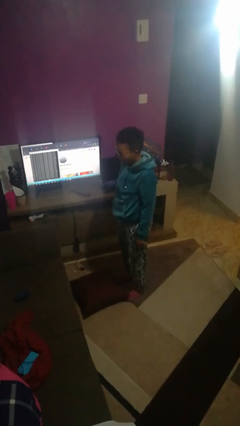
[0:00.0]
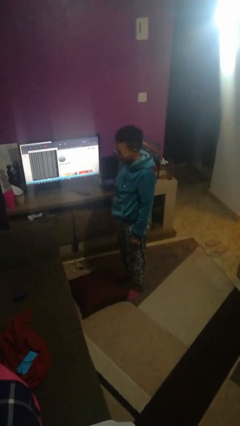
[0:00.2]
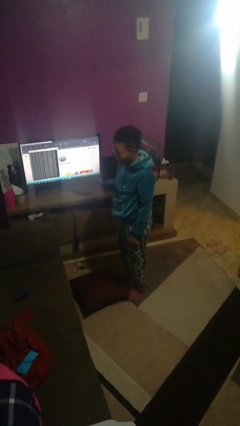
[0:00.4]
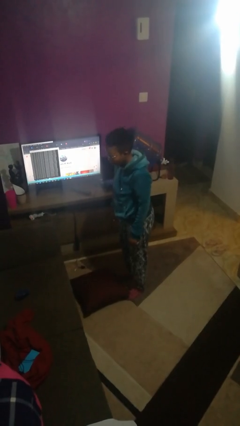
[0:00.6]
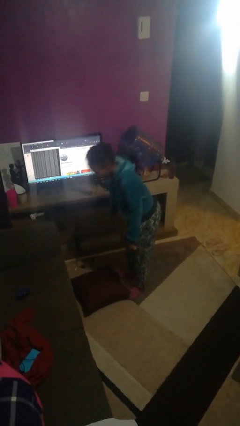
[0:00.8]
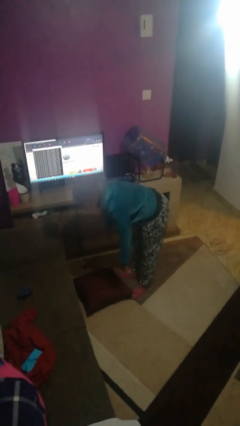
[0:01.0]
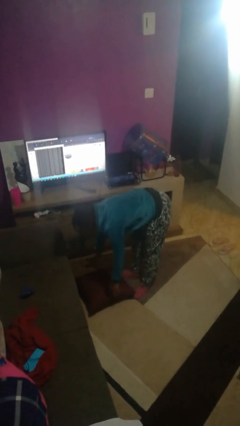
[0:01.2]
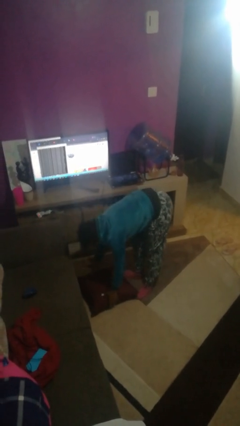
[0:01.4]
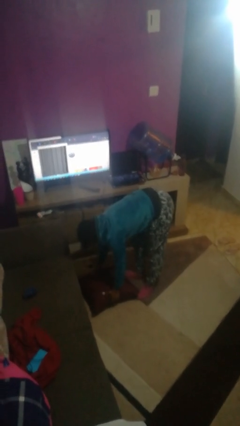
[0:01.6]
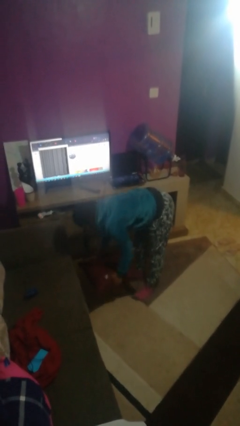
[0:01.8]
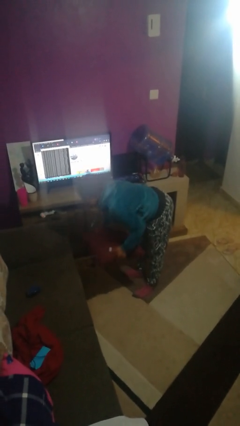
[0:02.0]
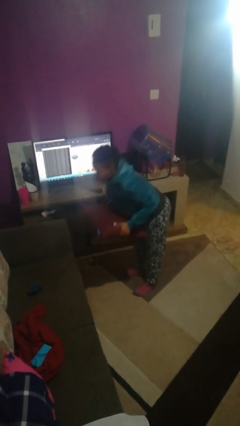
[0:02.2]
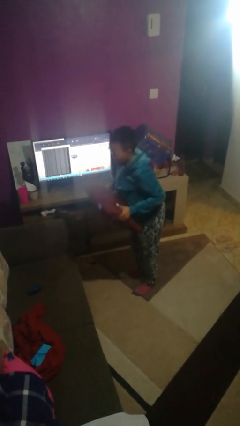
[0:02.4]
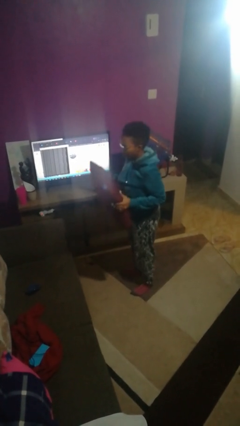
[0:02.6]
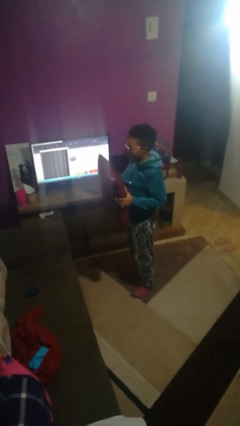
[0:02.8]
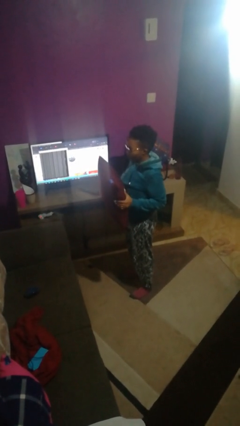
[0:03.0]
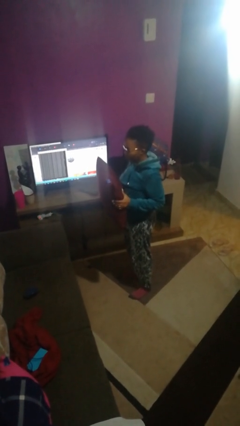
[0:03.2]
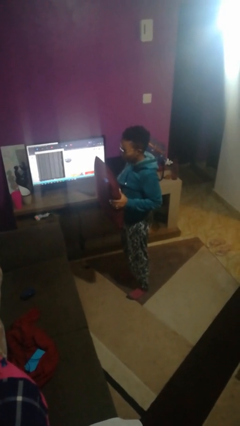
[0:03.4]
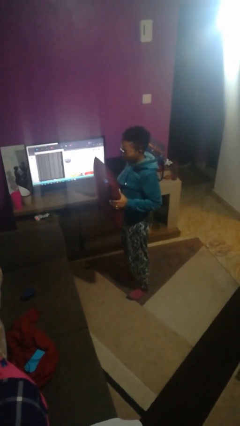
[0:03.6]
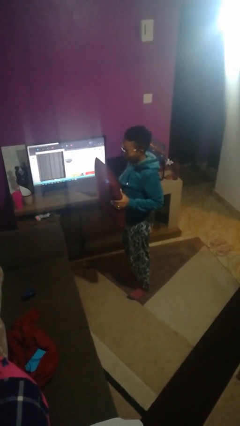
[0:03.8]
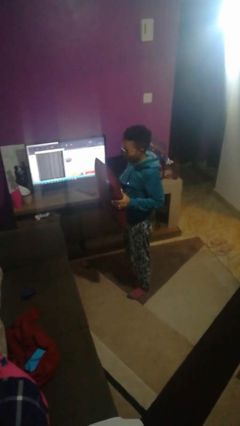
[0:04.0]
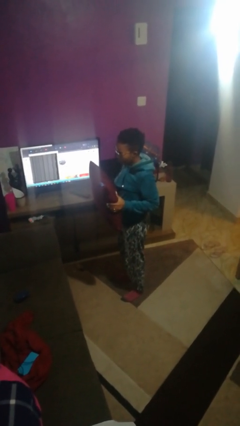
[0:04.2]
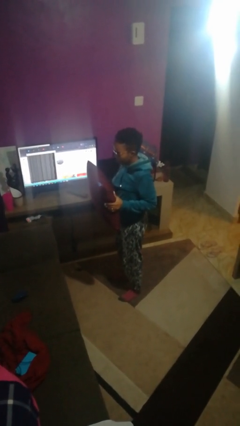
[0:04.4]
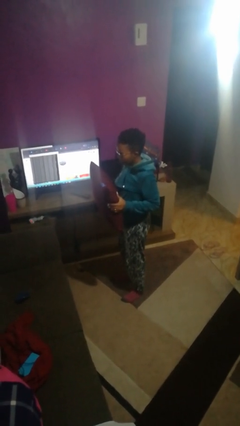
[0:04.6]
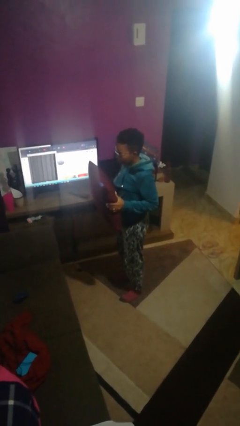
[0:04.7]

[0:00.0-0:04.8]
person picks up object from floor

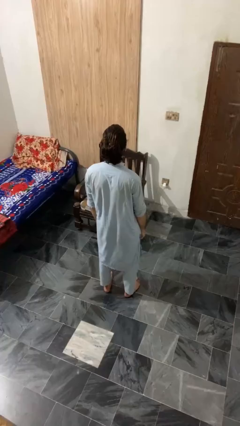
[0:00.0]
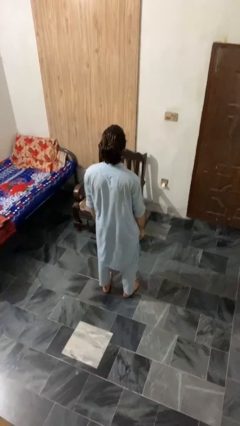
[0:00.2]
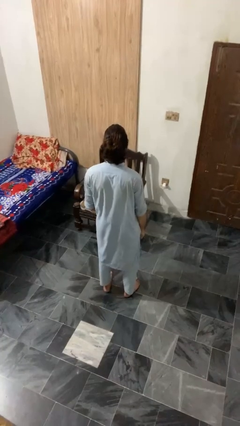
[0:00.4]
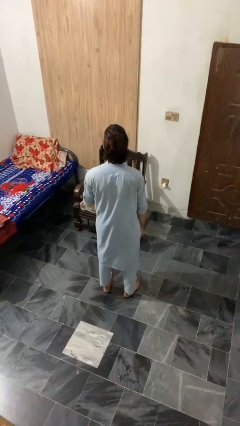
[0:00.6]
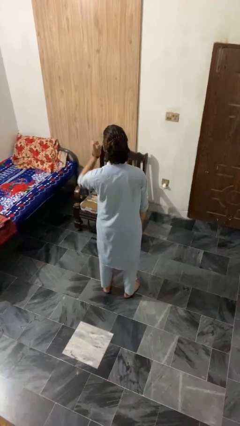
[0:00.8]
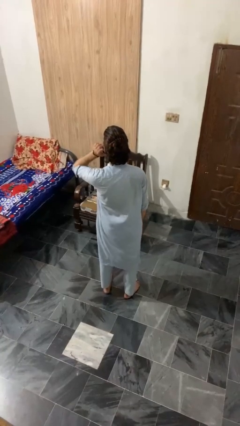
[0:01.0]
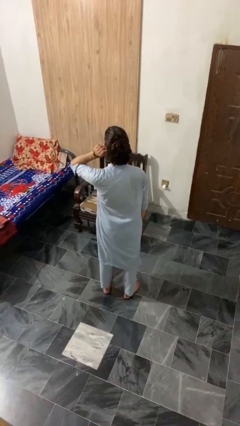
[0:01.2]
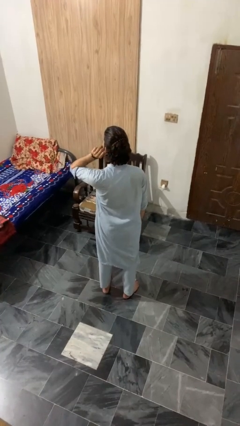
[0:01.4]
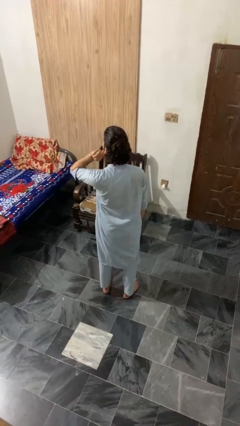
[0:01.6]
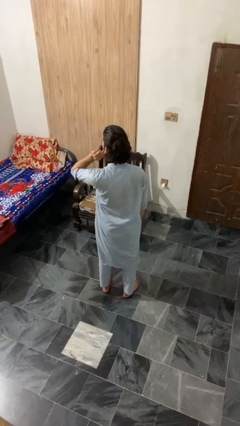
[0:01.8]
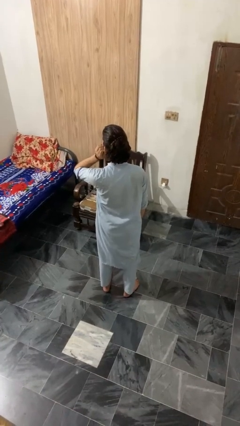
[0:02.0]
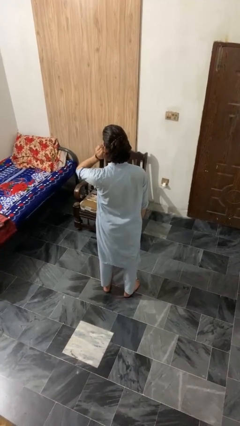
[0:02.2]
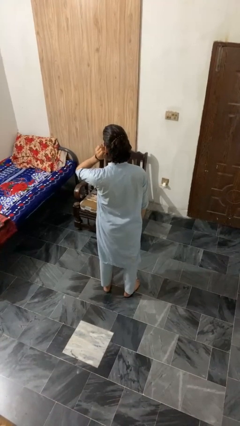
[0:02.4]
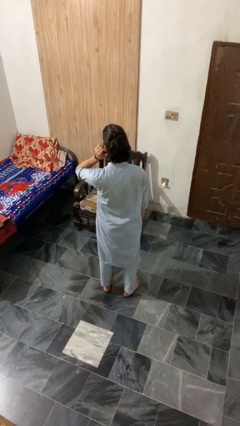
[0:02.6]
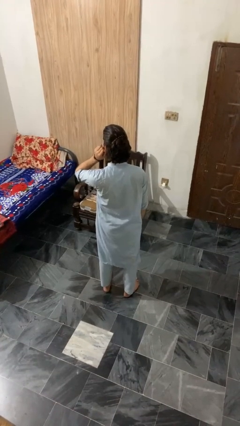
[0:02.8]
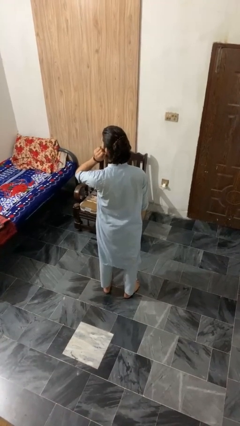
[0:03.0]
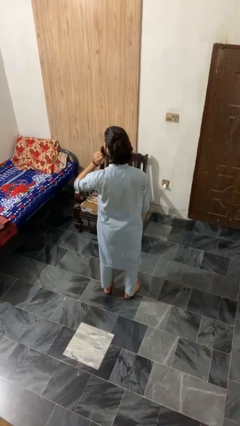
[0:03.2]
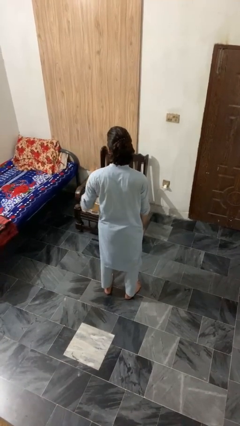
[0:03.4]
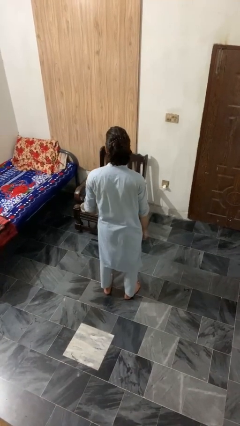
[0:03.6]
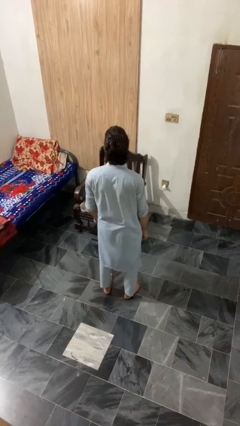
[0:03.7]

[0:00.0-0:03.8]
person touches earlobe

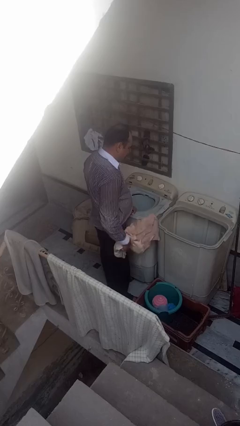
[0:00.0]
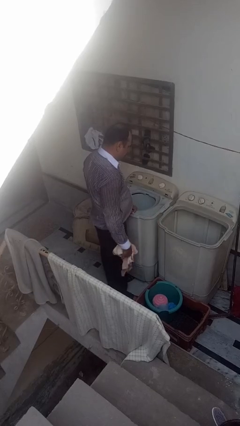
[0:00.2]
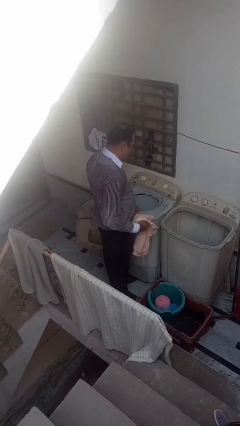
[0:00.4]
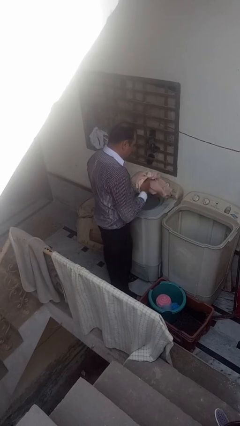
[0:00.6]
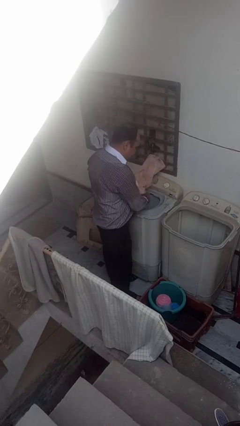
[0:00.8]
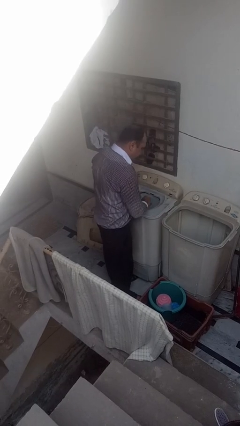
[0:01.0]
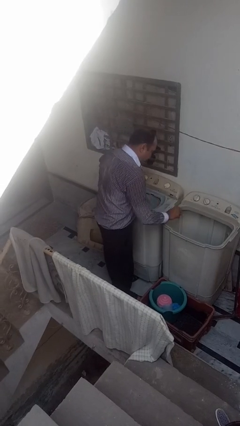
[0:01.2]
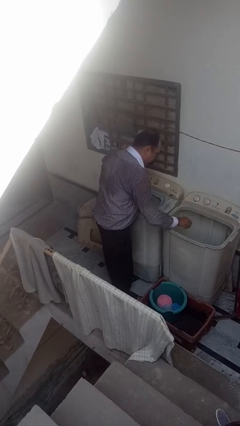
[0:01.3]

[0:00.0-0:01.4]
person loads dryer

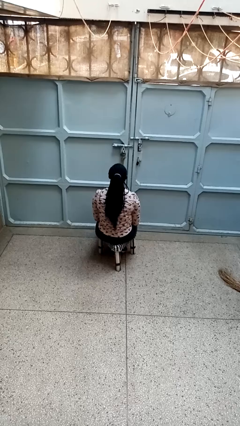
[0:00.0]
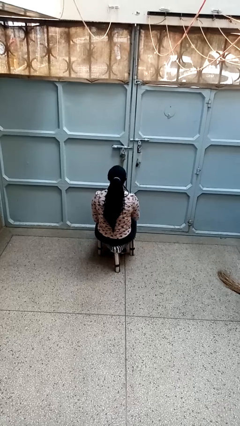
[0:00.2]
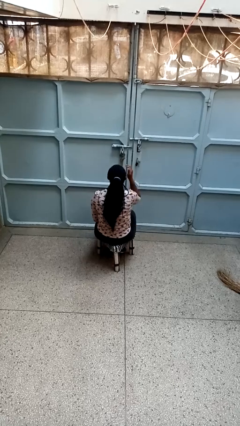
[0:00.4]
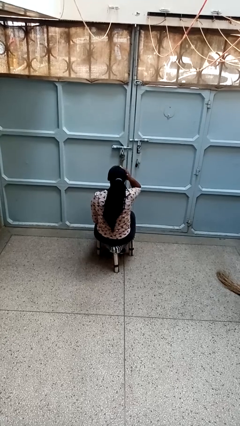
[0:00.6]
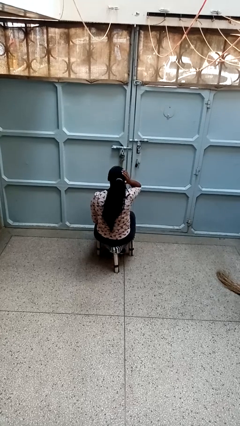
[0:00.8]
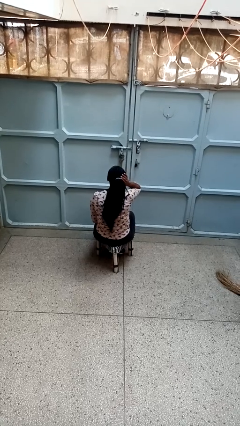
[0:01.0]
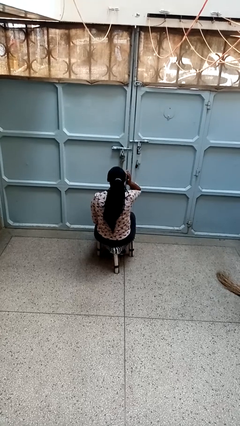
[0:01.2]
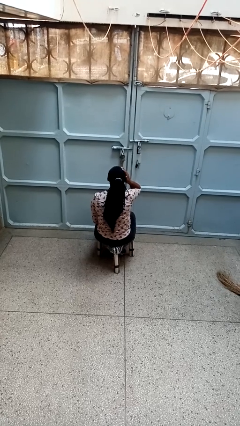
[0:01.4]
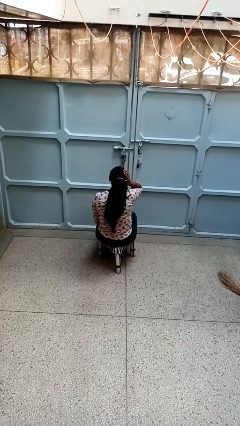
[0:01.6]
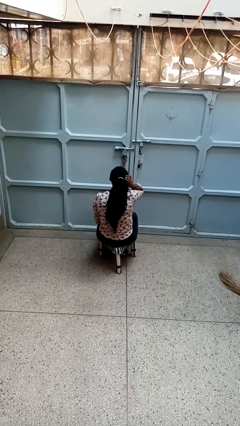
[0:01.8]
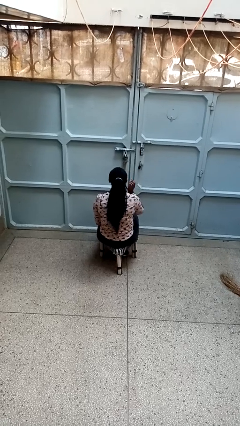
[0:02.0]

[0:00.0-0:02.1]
person strokes hair

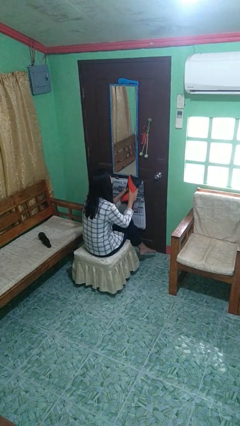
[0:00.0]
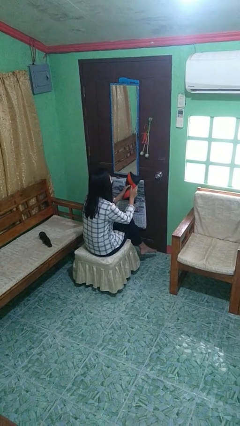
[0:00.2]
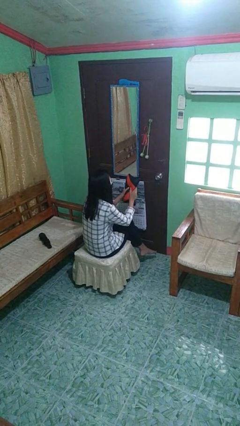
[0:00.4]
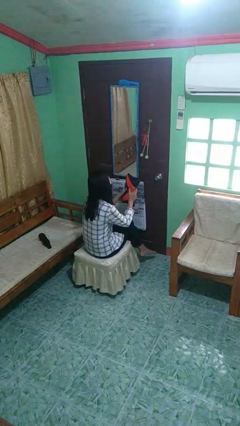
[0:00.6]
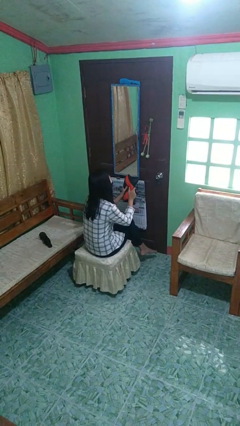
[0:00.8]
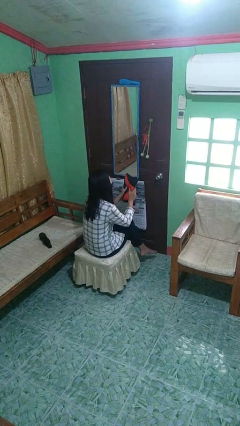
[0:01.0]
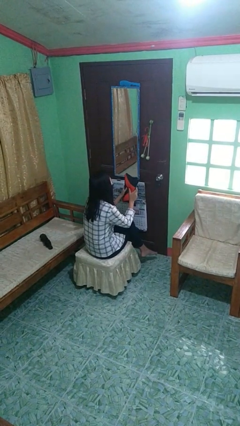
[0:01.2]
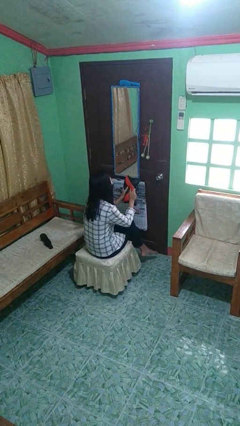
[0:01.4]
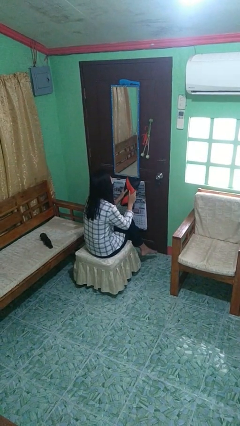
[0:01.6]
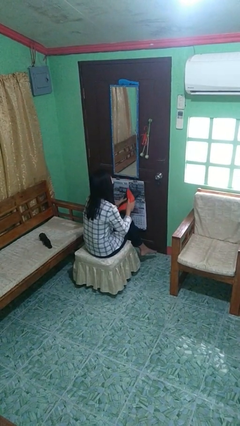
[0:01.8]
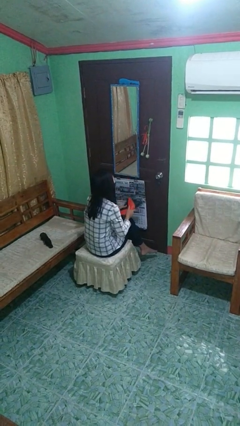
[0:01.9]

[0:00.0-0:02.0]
person squeezes object

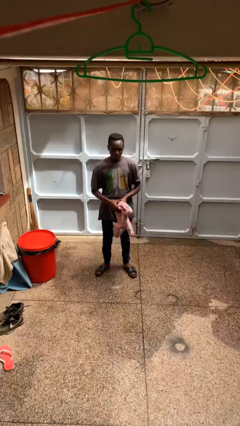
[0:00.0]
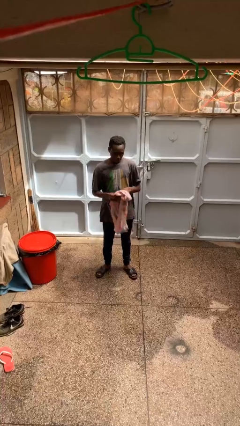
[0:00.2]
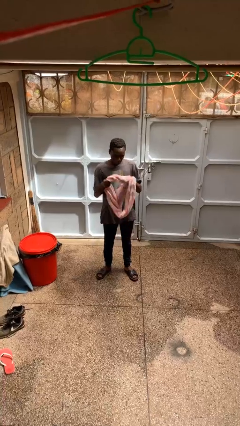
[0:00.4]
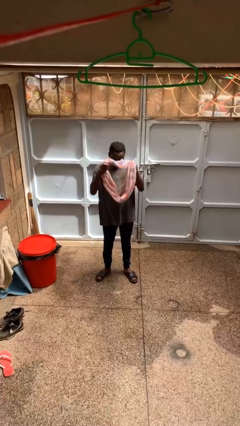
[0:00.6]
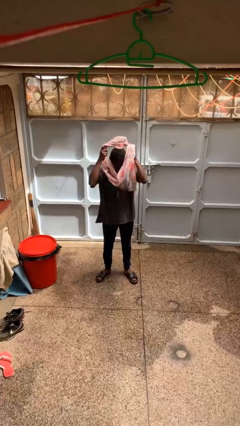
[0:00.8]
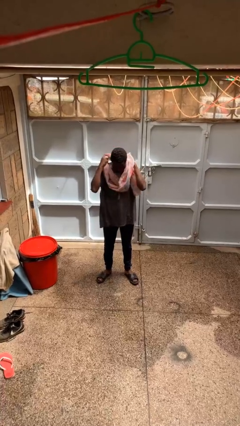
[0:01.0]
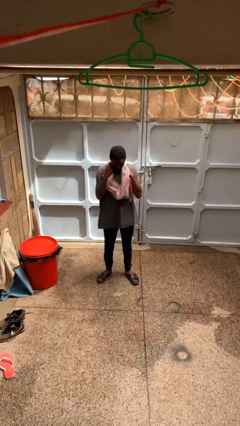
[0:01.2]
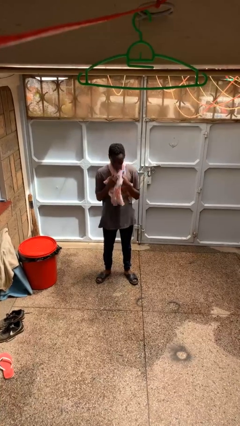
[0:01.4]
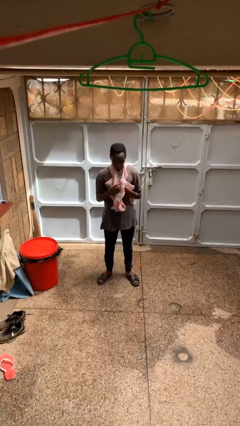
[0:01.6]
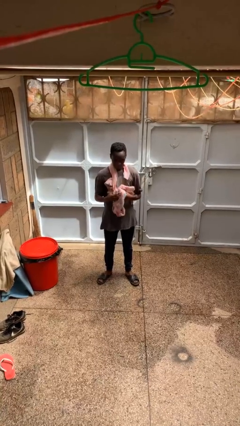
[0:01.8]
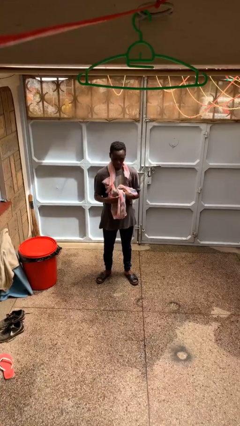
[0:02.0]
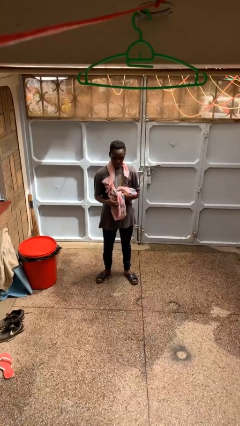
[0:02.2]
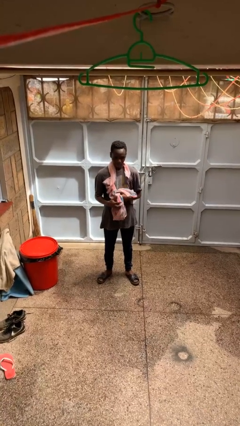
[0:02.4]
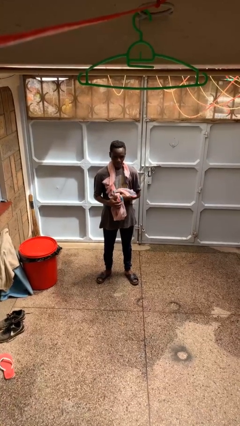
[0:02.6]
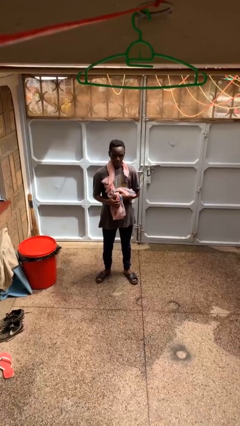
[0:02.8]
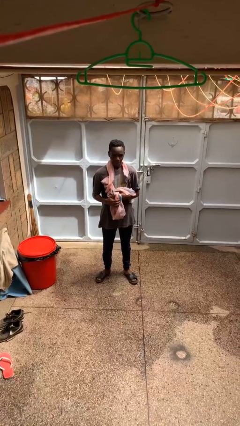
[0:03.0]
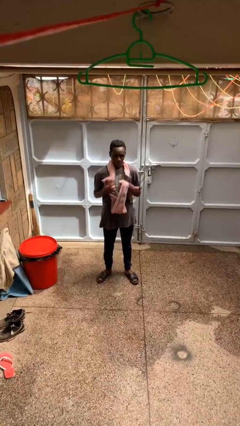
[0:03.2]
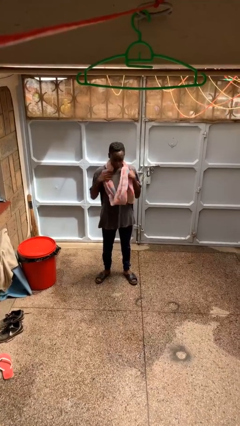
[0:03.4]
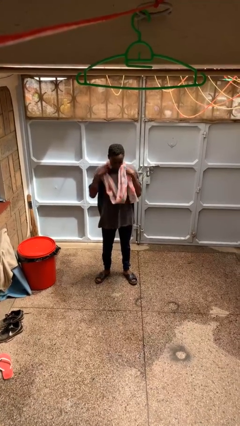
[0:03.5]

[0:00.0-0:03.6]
person puts on scarf
